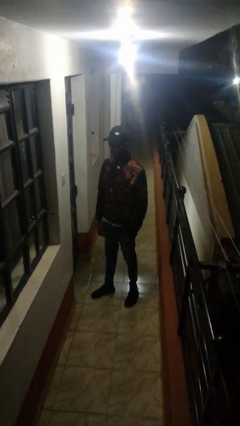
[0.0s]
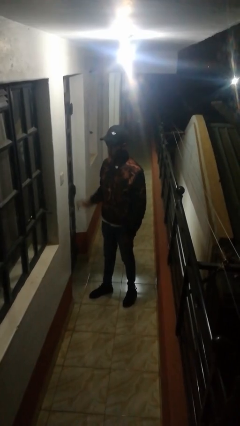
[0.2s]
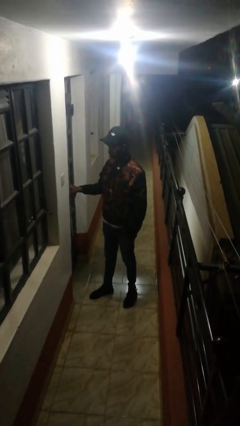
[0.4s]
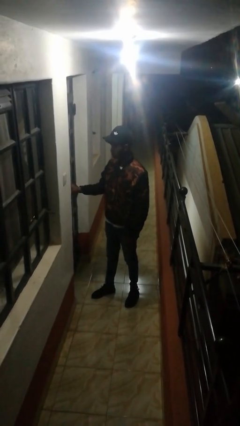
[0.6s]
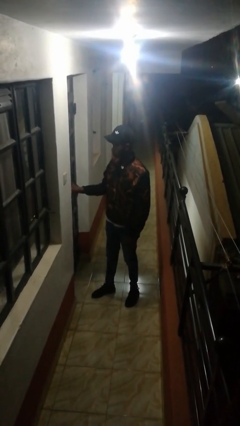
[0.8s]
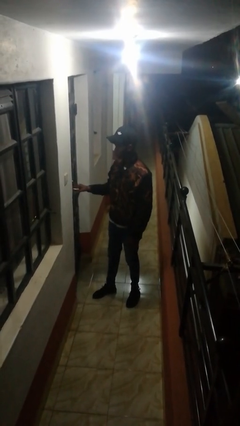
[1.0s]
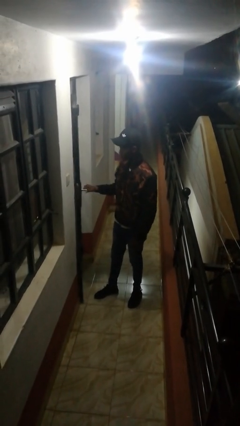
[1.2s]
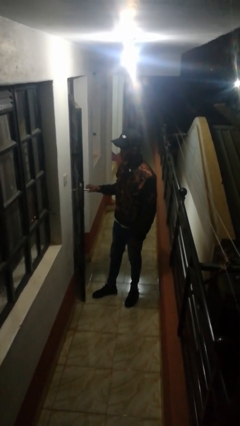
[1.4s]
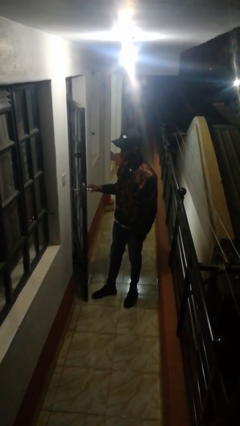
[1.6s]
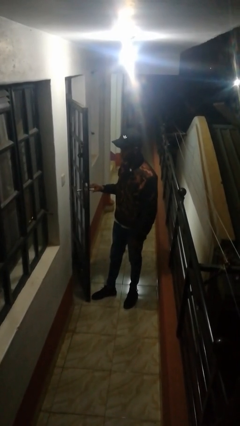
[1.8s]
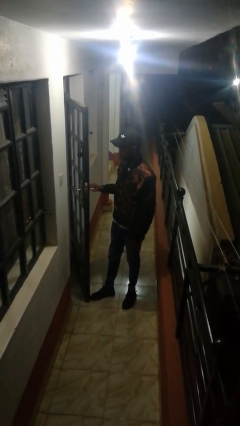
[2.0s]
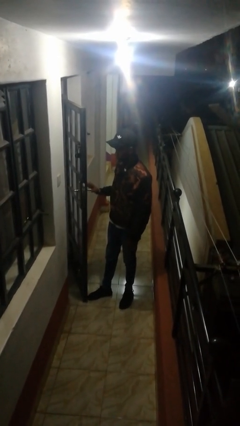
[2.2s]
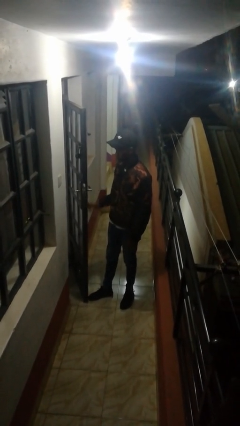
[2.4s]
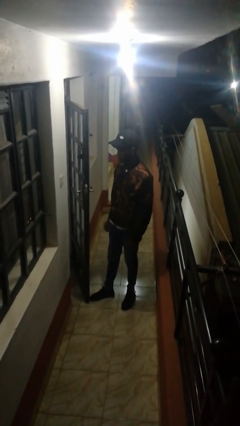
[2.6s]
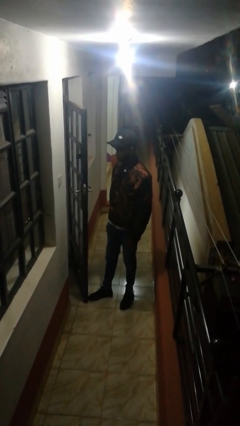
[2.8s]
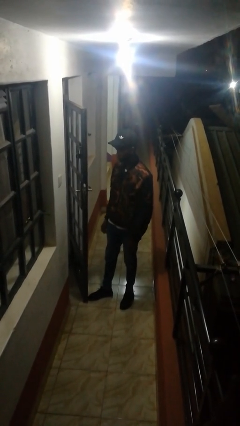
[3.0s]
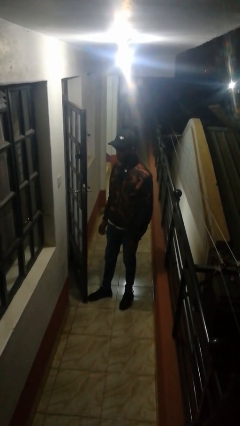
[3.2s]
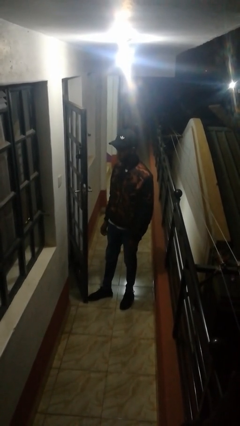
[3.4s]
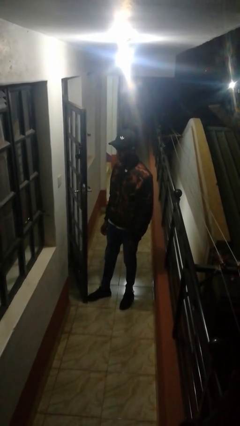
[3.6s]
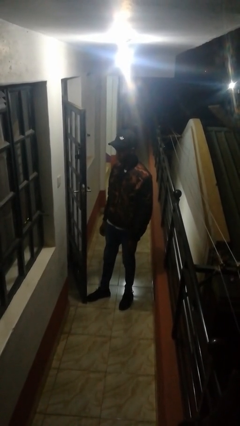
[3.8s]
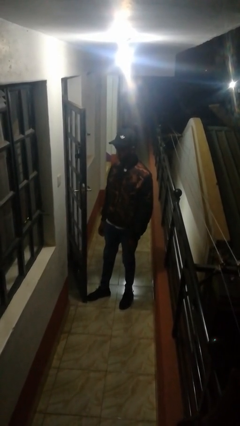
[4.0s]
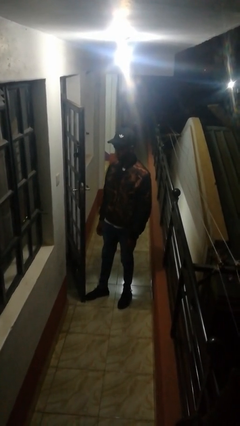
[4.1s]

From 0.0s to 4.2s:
person opens facility door

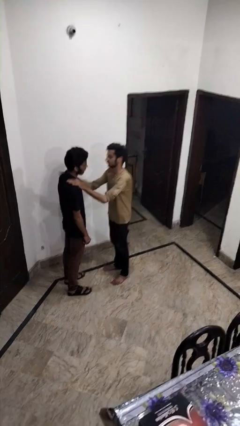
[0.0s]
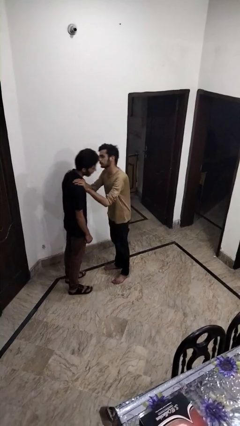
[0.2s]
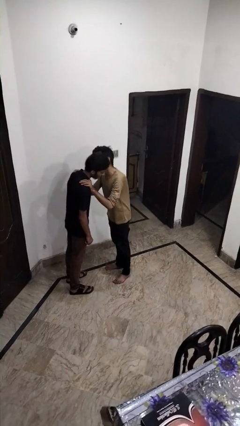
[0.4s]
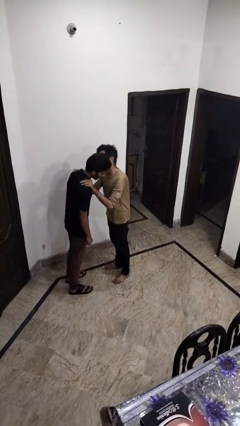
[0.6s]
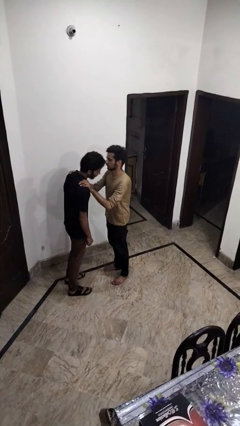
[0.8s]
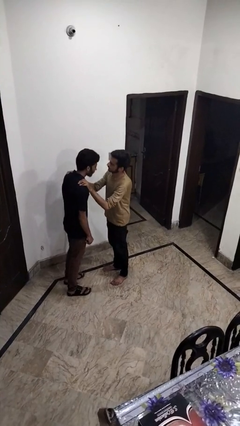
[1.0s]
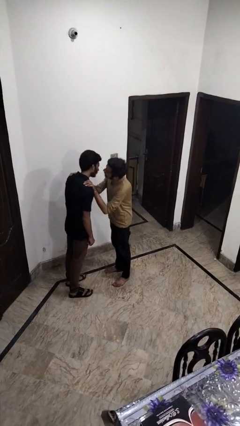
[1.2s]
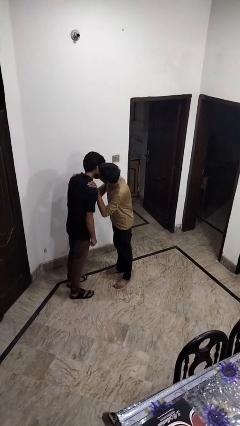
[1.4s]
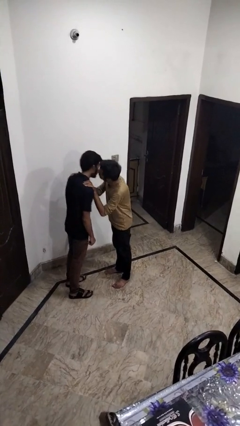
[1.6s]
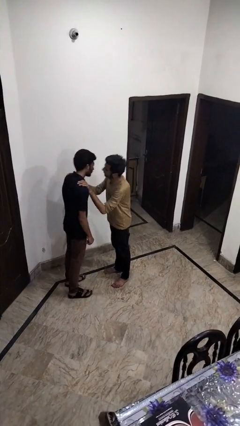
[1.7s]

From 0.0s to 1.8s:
person kisses cheek of person

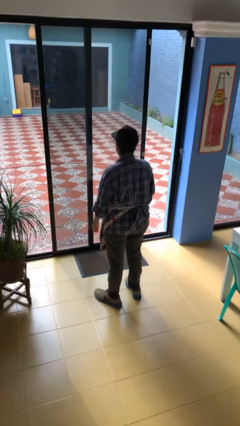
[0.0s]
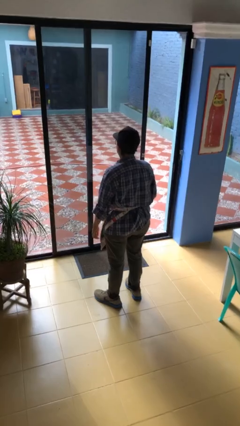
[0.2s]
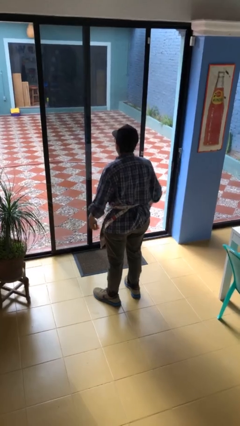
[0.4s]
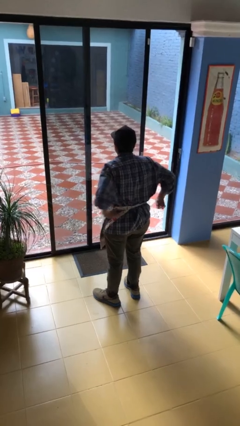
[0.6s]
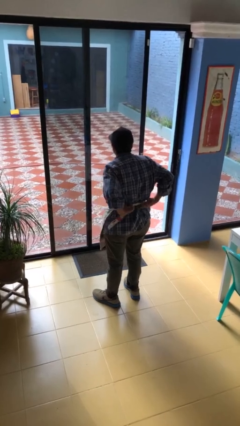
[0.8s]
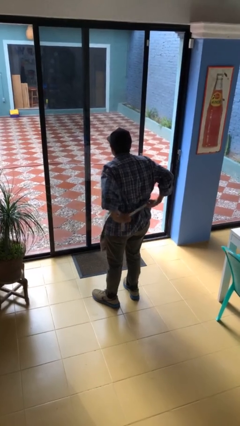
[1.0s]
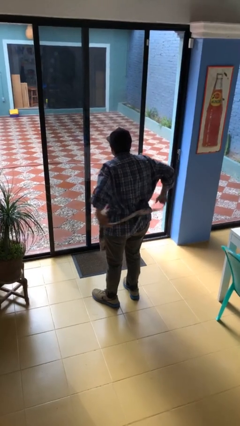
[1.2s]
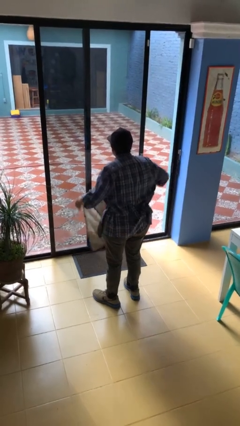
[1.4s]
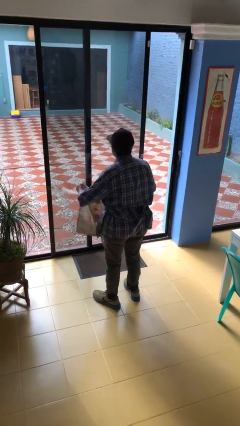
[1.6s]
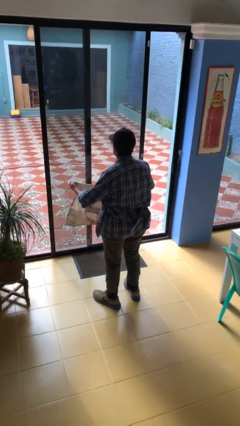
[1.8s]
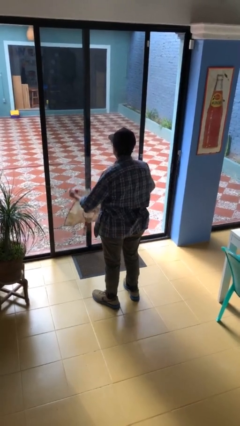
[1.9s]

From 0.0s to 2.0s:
person takes off apron

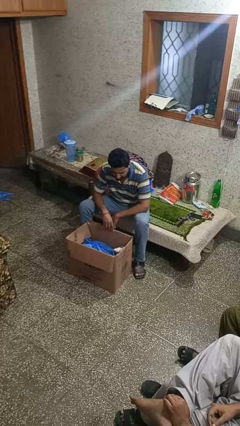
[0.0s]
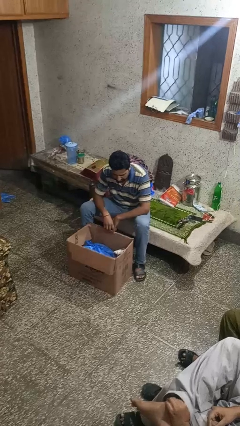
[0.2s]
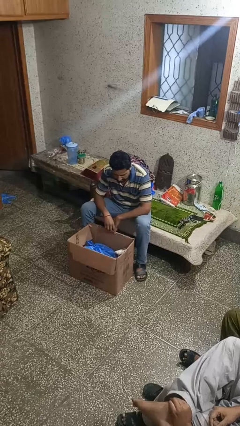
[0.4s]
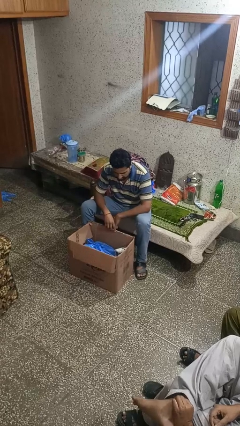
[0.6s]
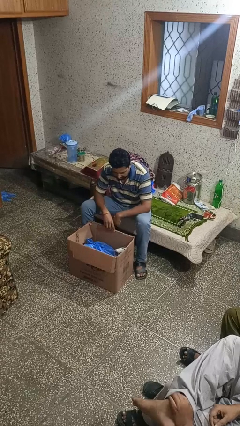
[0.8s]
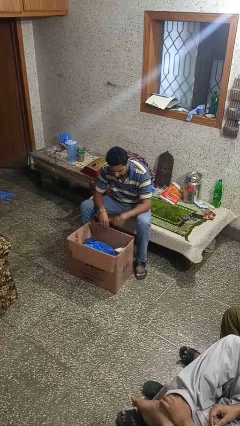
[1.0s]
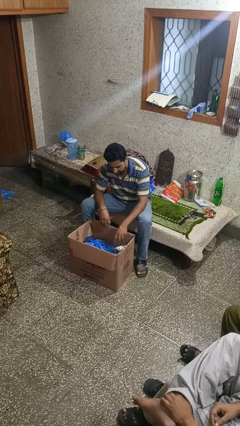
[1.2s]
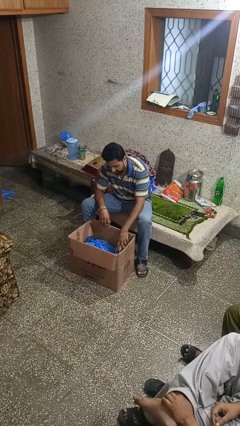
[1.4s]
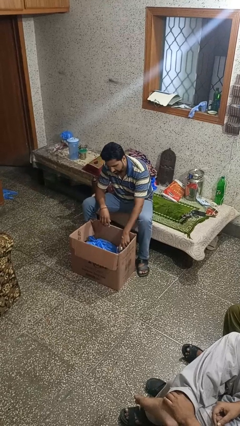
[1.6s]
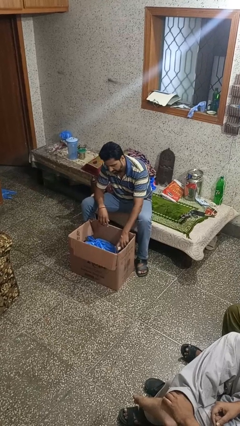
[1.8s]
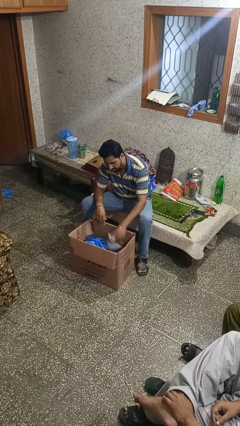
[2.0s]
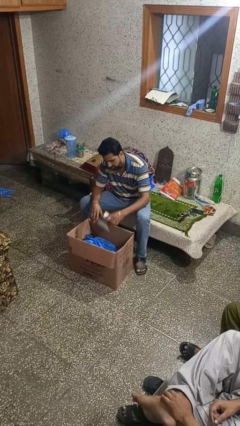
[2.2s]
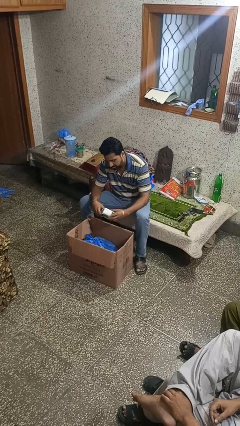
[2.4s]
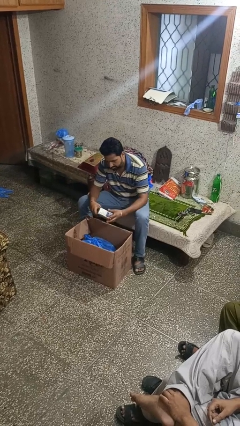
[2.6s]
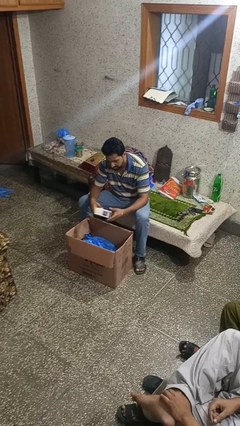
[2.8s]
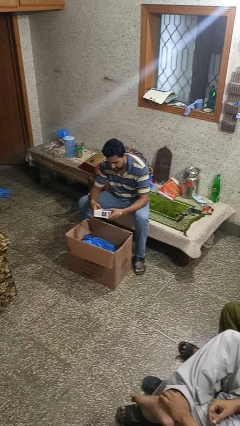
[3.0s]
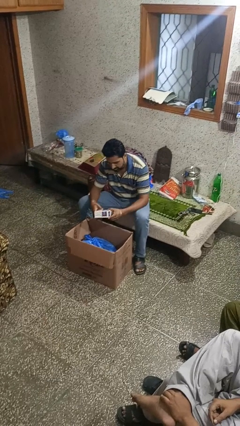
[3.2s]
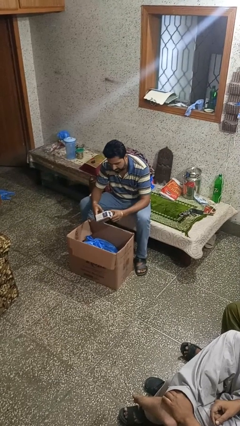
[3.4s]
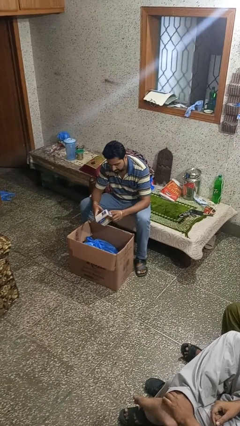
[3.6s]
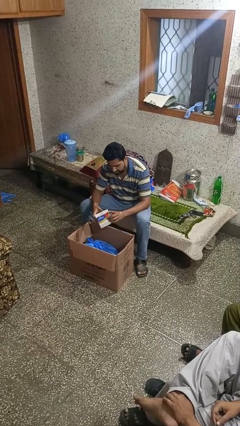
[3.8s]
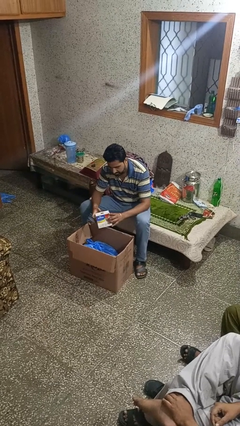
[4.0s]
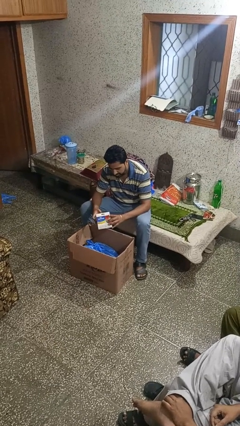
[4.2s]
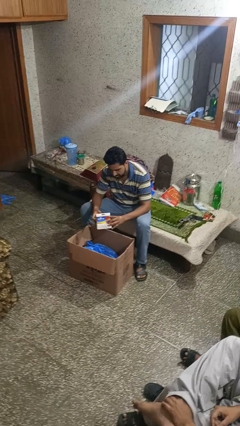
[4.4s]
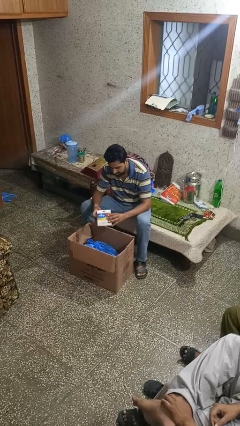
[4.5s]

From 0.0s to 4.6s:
person takes object from box

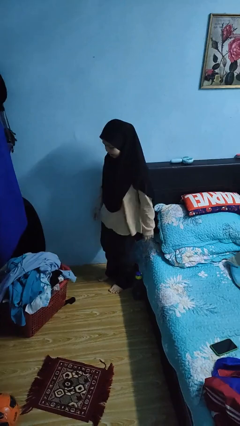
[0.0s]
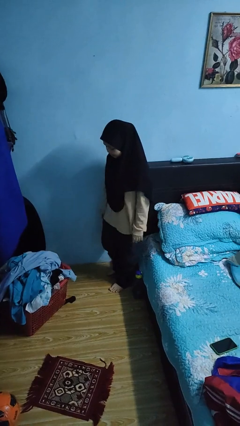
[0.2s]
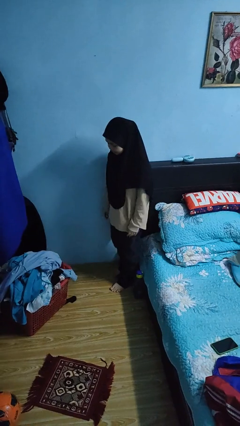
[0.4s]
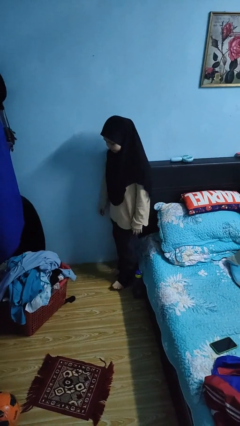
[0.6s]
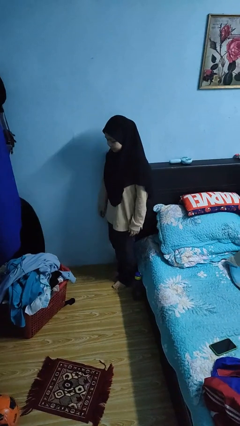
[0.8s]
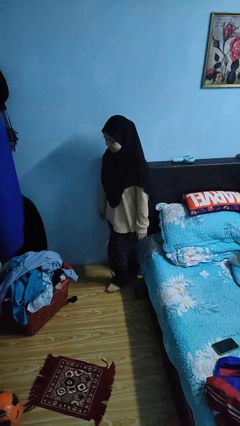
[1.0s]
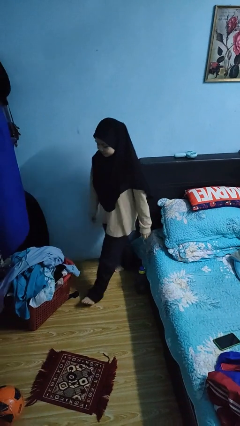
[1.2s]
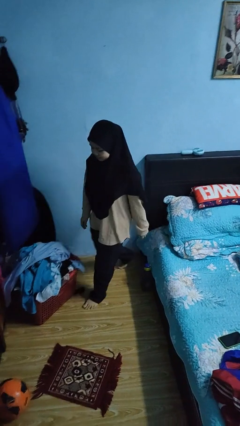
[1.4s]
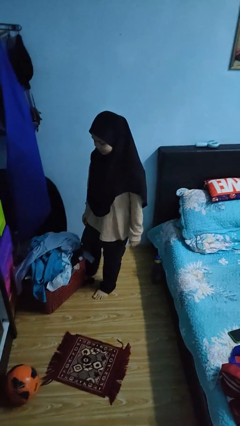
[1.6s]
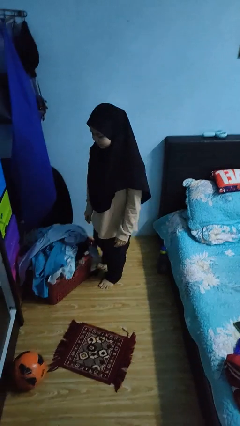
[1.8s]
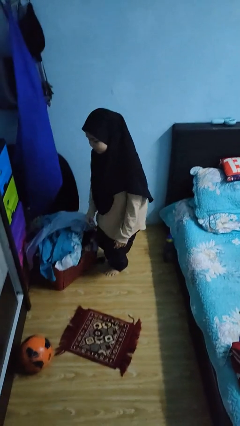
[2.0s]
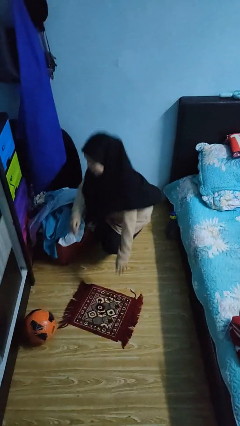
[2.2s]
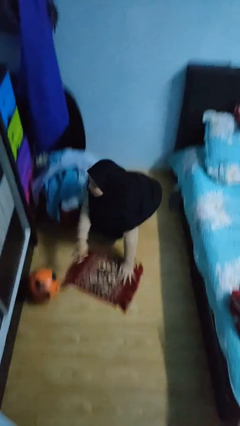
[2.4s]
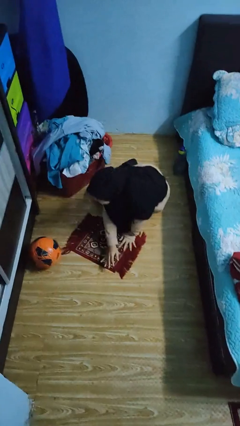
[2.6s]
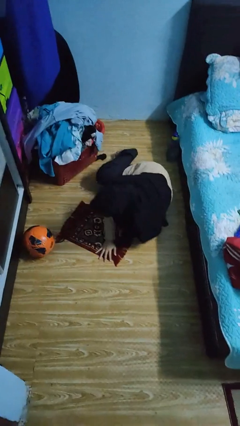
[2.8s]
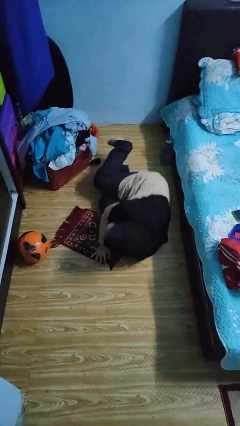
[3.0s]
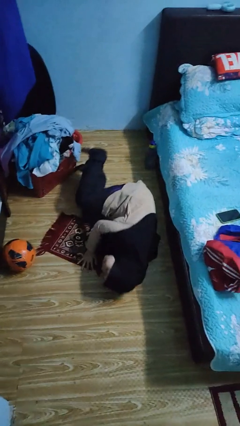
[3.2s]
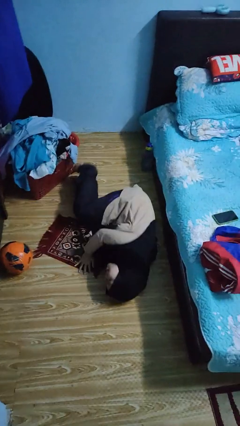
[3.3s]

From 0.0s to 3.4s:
person trips on object on floor

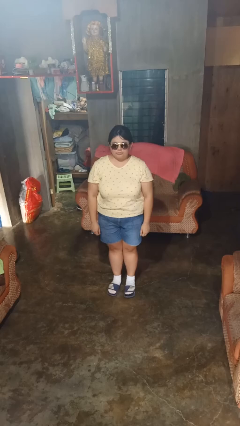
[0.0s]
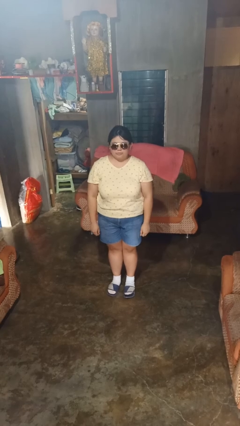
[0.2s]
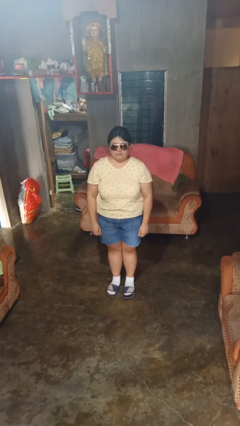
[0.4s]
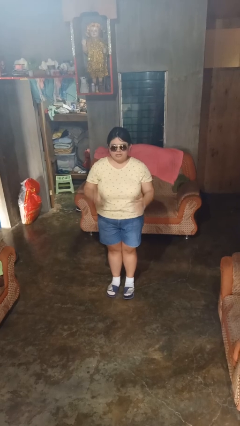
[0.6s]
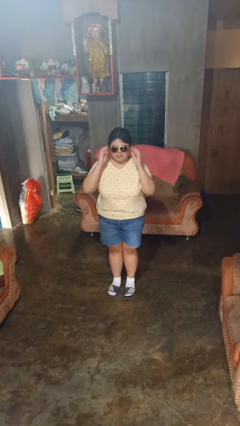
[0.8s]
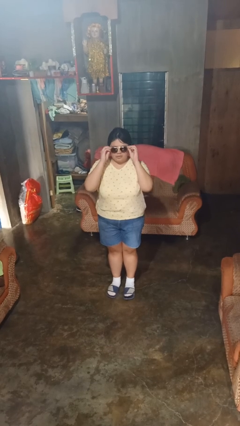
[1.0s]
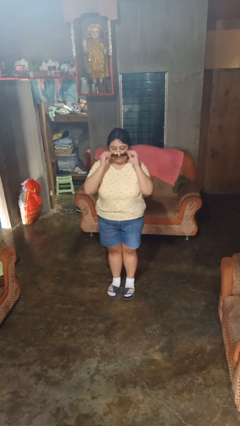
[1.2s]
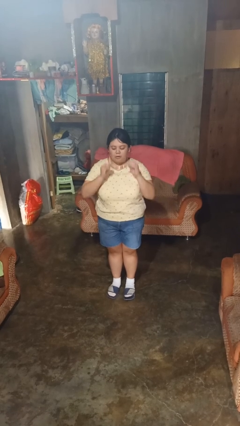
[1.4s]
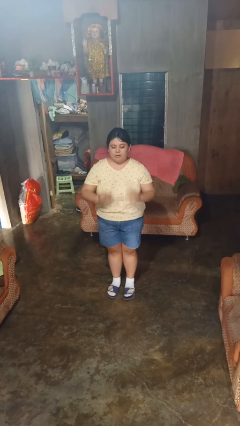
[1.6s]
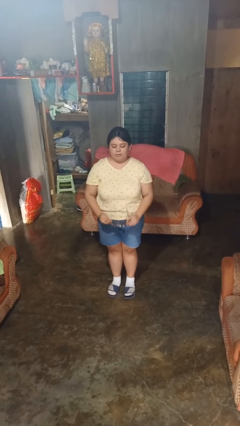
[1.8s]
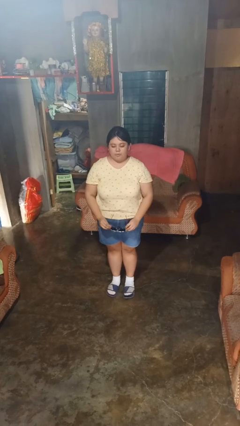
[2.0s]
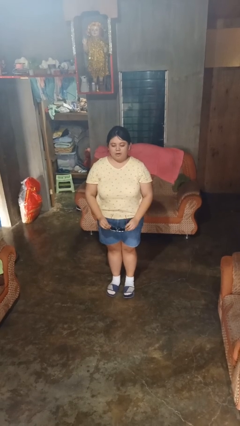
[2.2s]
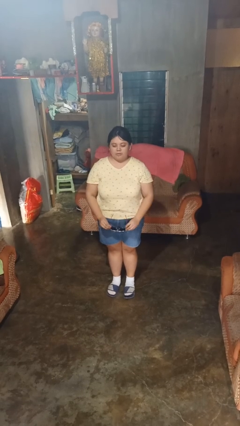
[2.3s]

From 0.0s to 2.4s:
person takes off sunglasses
